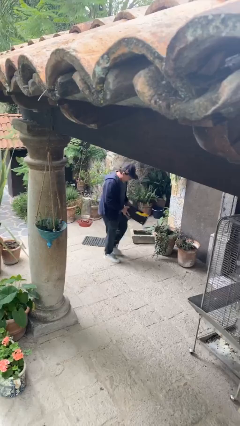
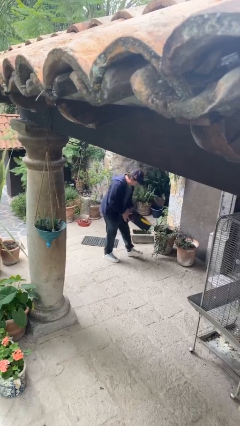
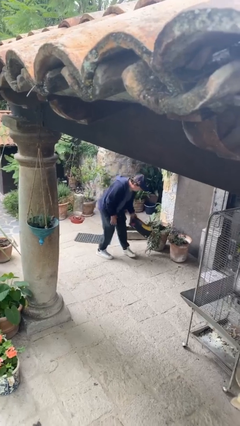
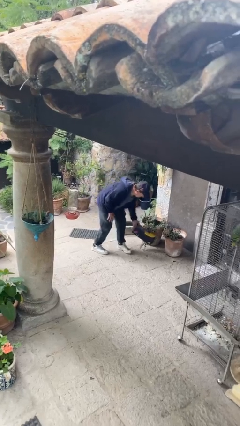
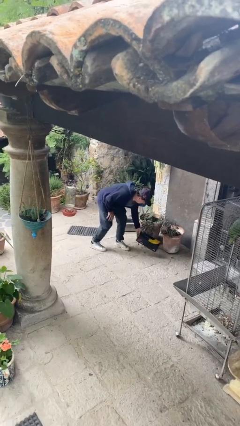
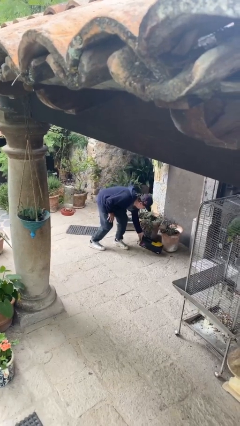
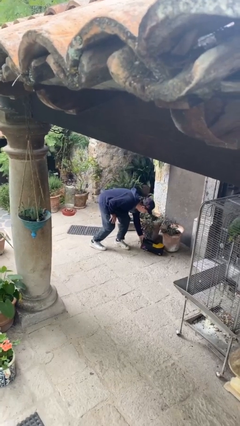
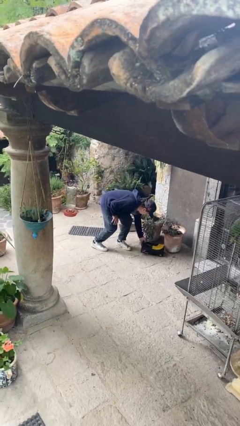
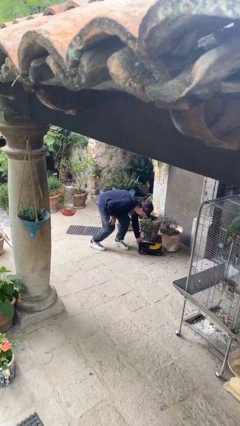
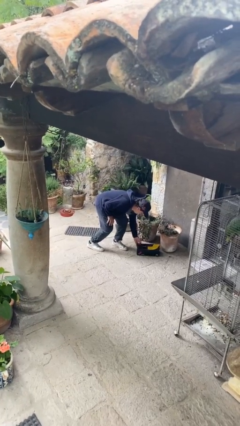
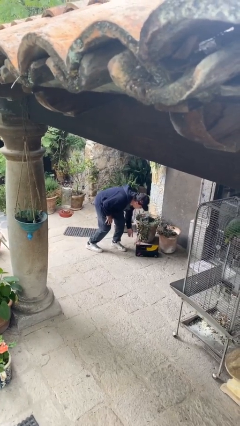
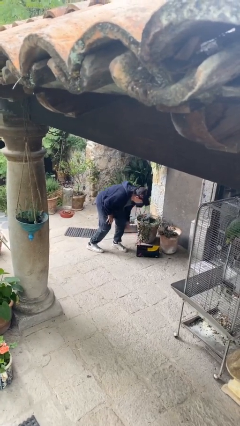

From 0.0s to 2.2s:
person puts down object on floor

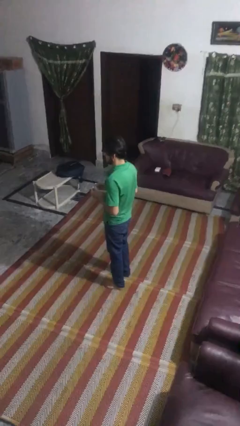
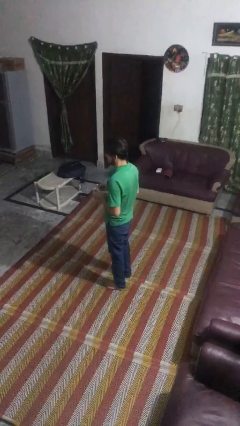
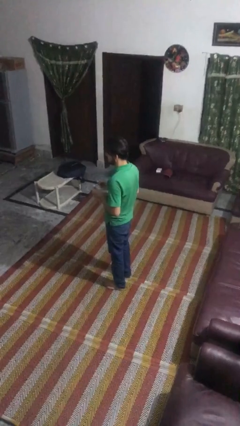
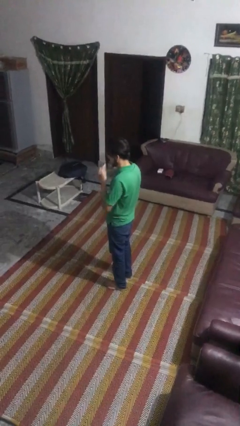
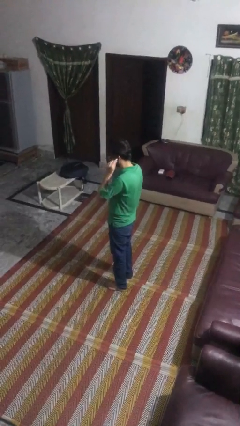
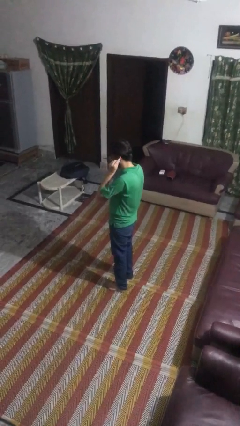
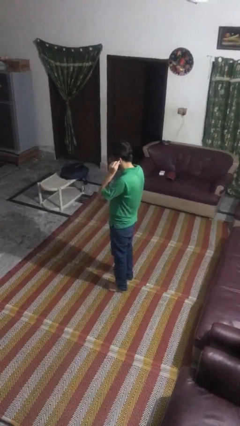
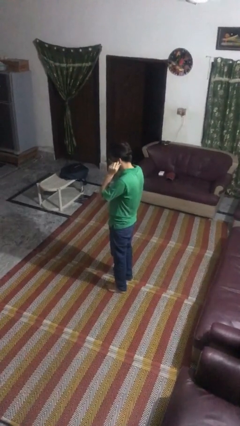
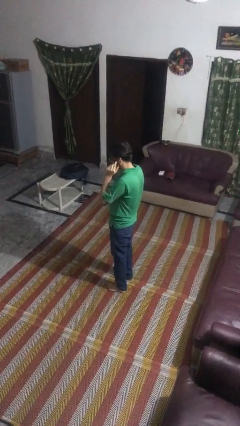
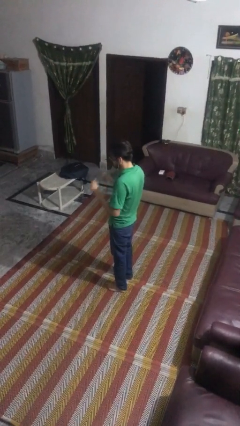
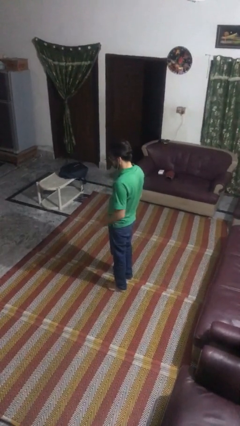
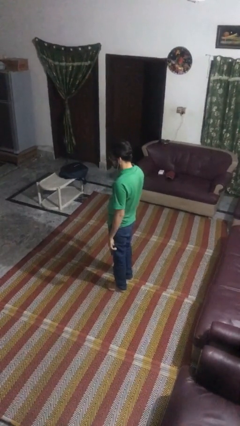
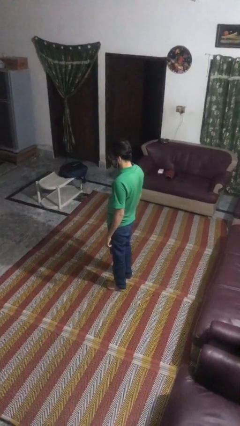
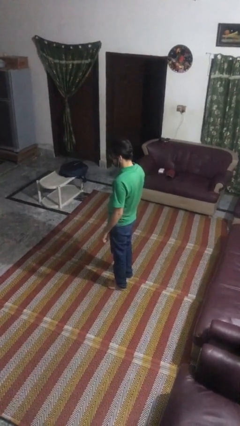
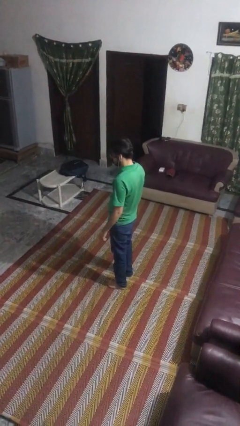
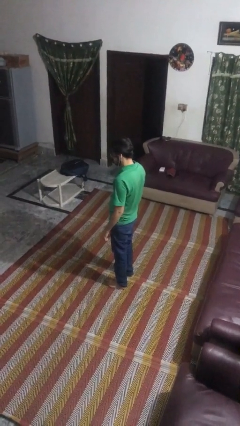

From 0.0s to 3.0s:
person puts on headphones

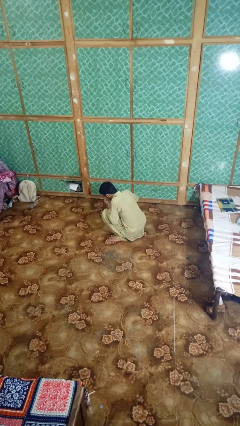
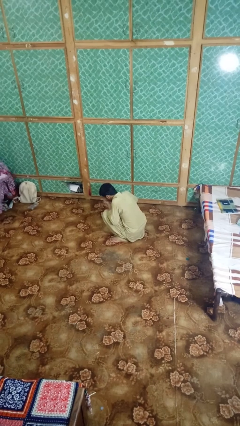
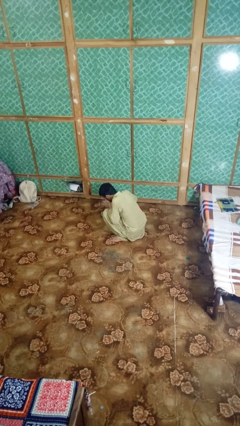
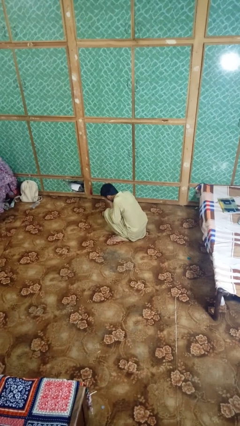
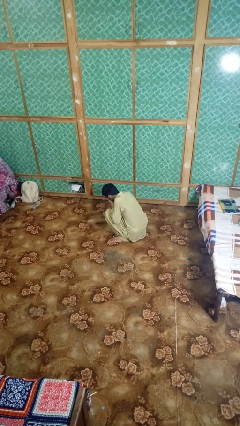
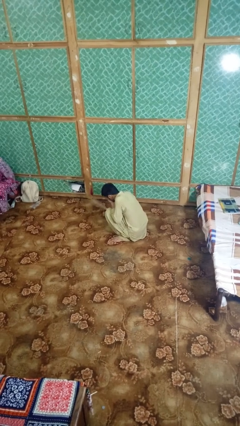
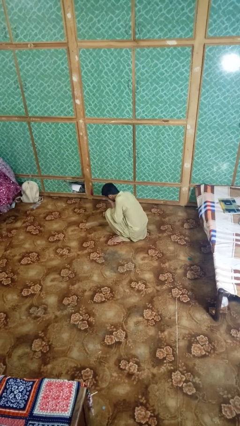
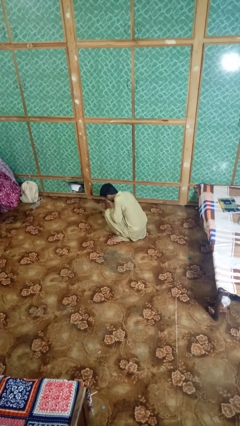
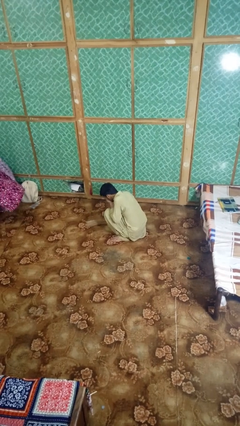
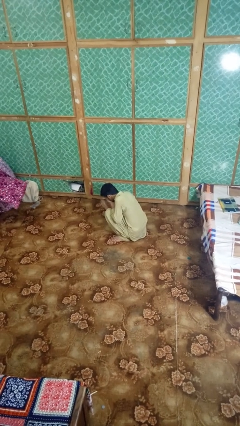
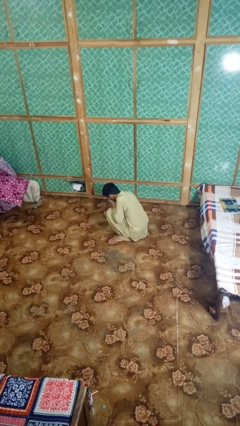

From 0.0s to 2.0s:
person yawns

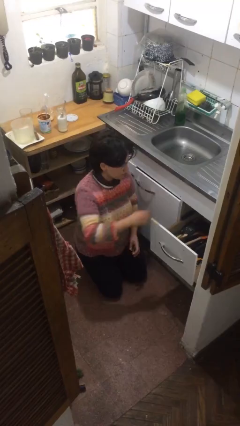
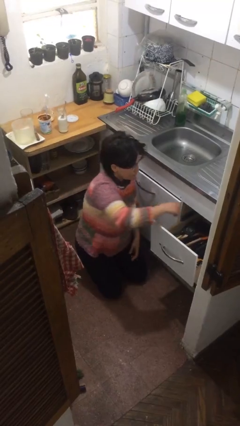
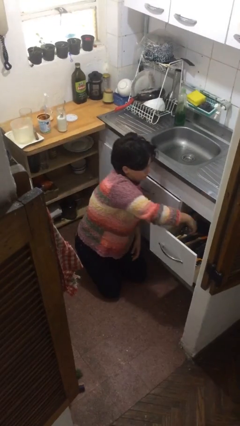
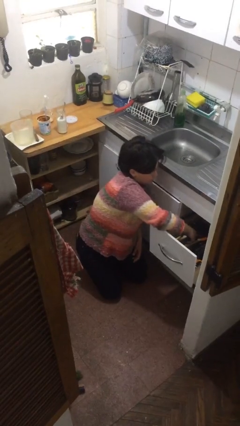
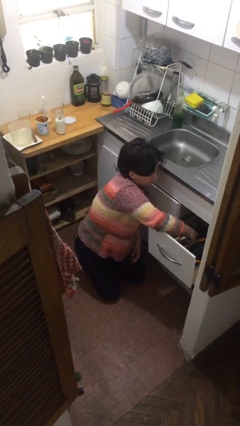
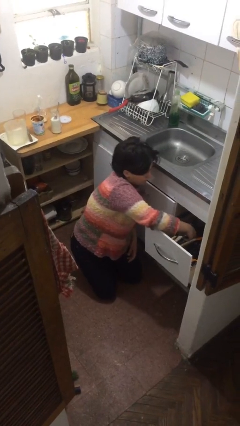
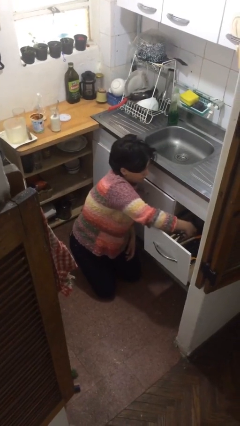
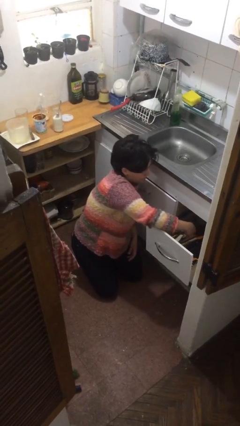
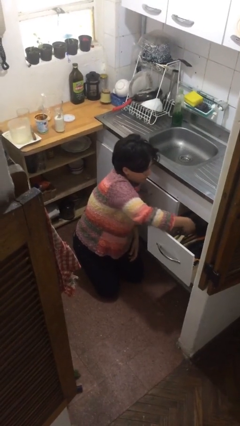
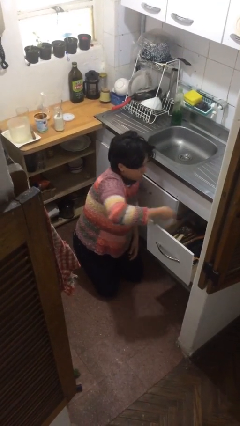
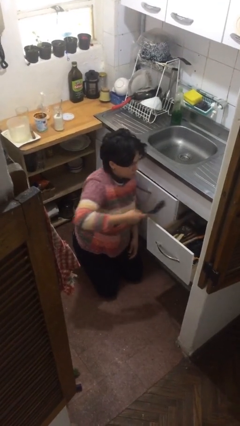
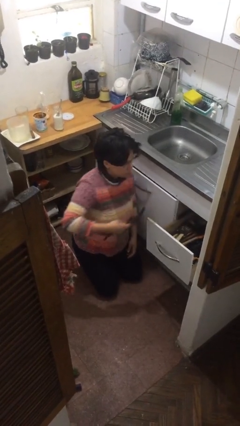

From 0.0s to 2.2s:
person takes object from kitchen drawer

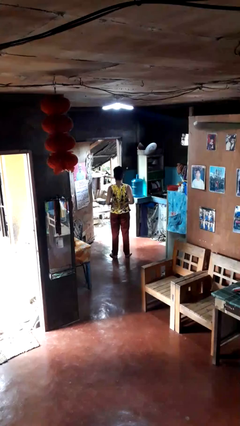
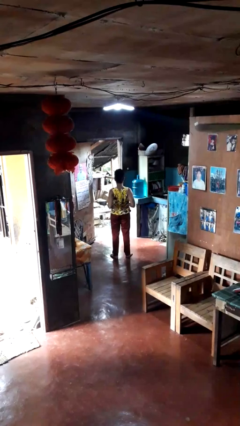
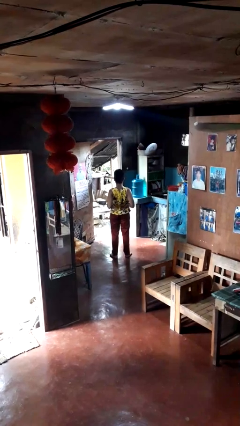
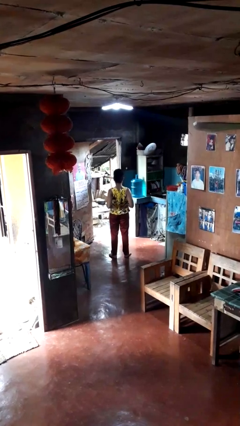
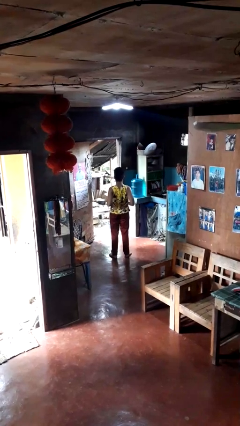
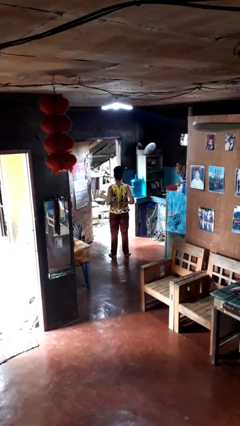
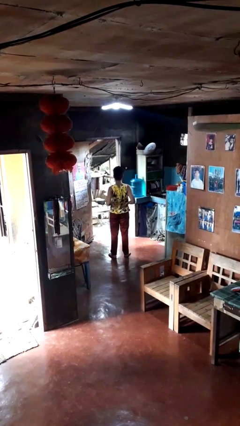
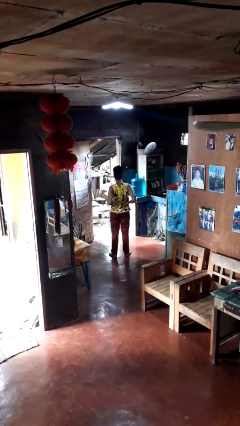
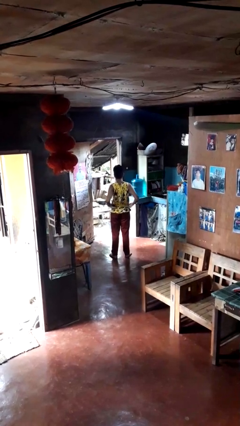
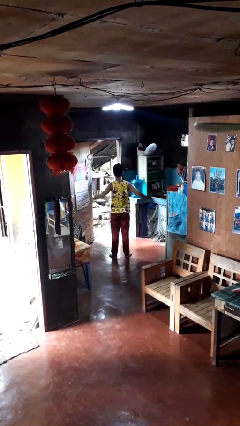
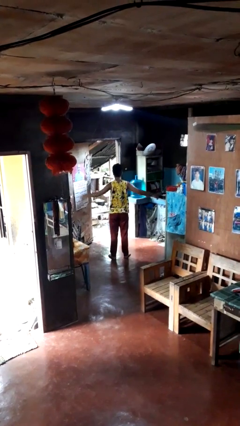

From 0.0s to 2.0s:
person stretches back

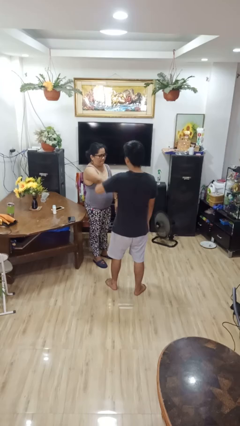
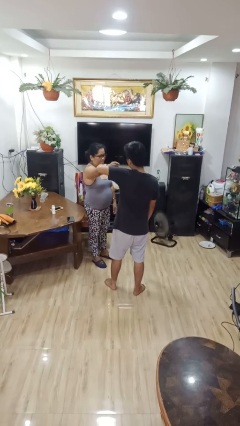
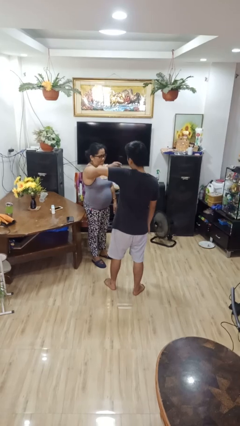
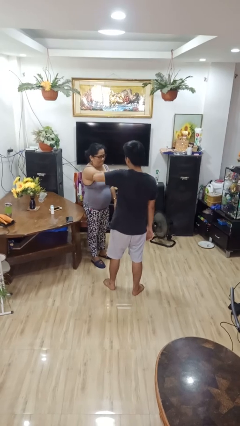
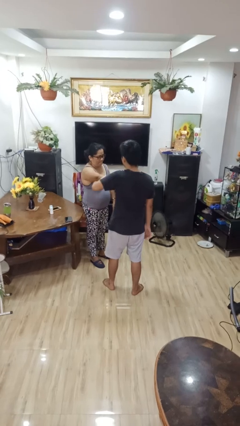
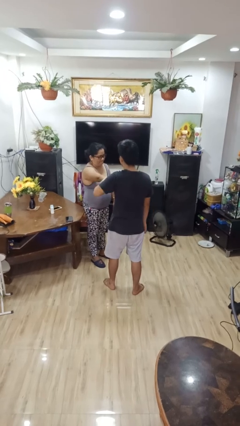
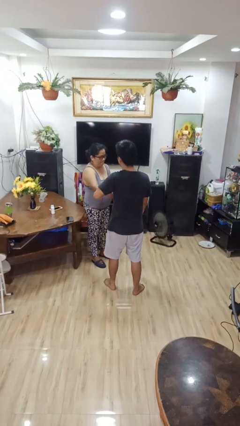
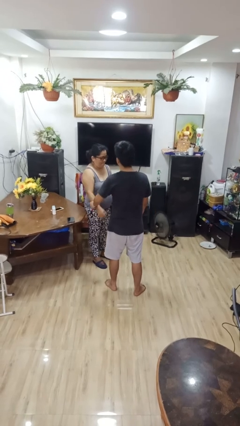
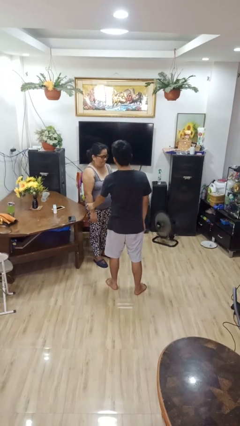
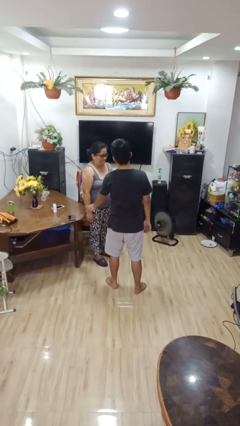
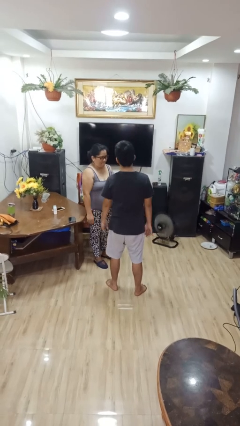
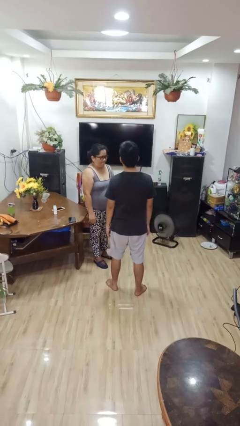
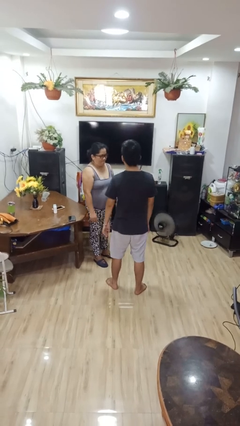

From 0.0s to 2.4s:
person grabs person by forearm

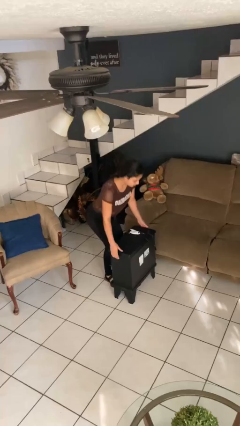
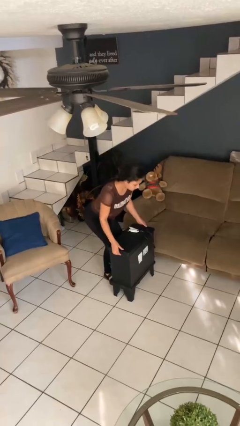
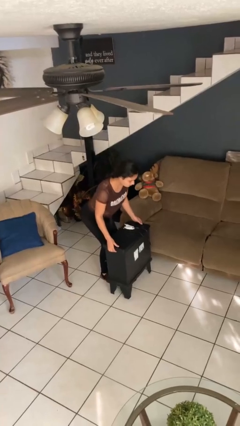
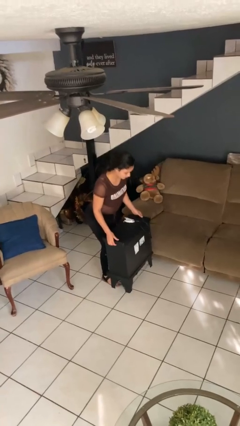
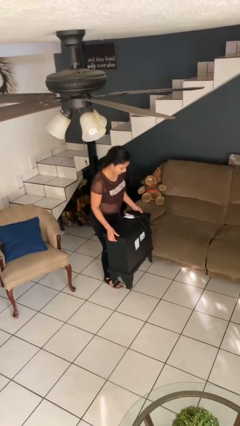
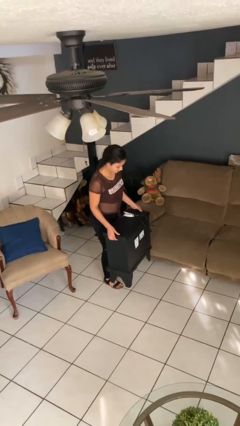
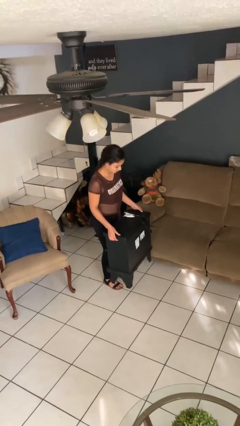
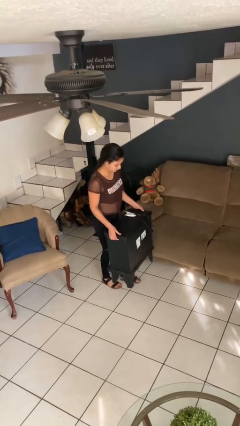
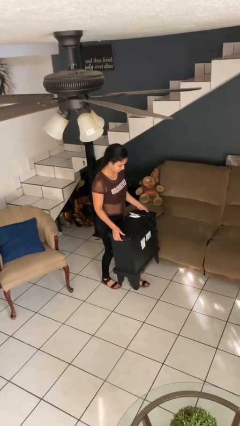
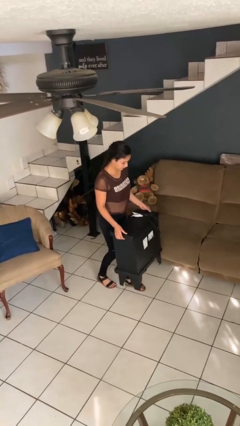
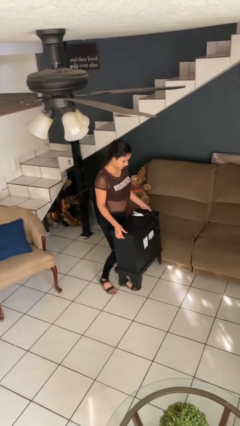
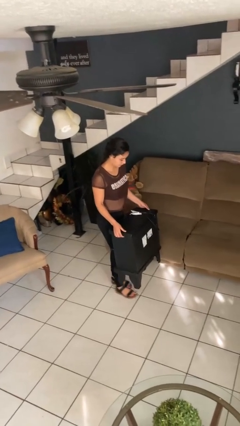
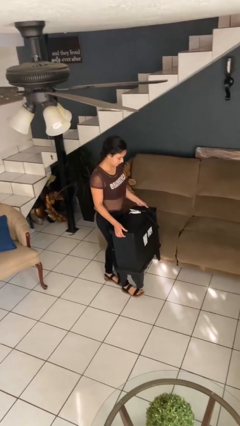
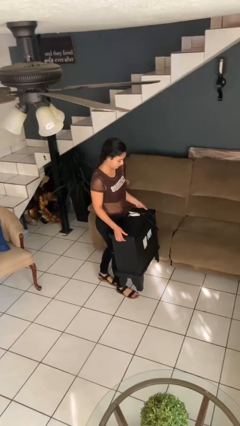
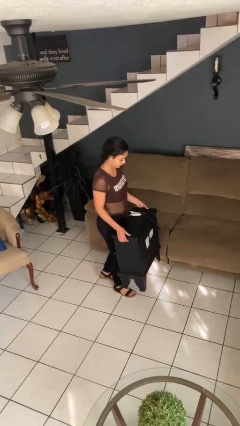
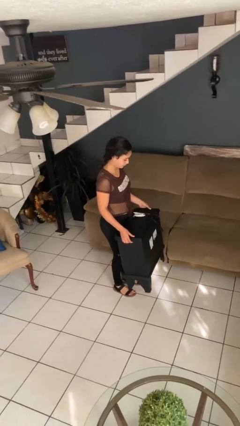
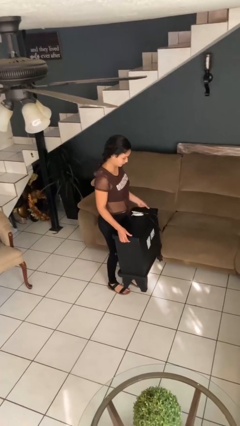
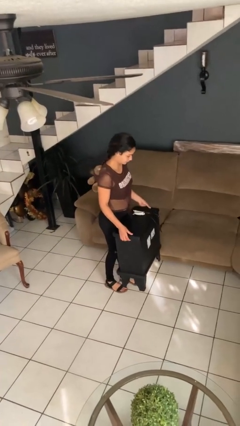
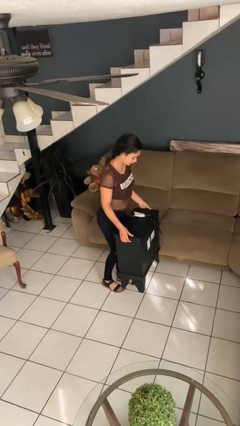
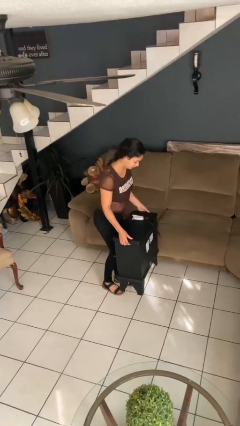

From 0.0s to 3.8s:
person carries furniture
